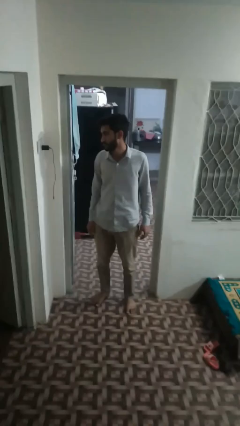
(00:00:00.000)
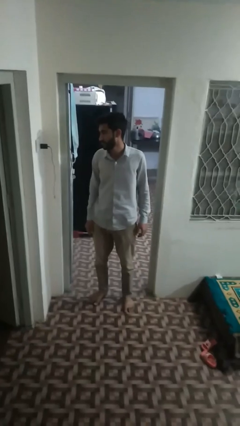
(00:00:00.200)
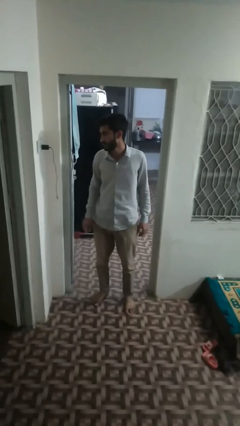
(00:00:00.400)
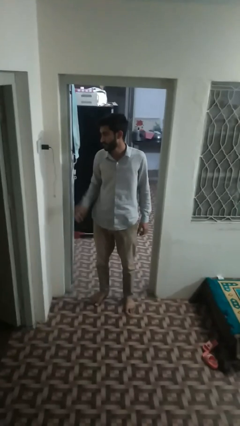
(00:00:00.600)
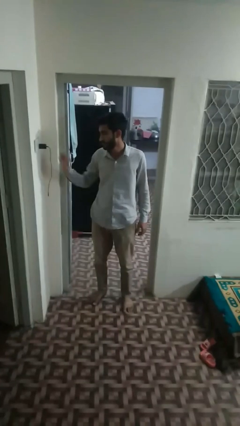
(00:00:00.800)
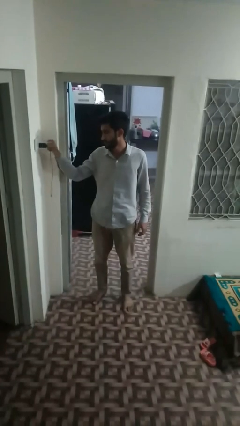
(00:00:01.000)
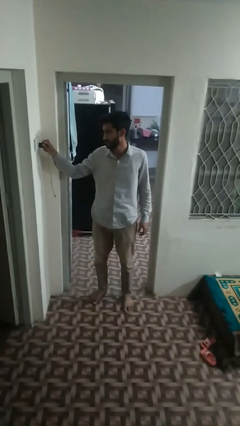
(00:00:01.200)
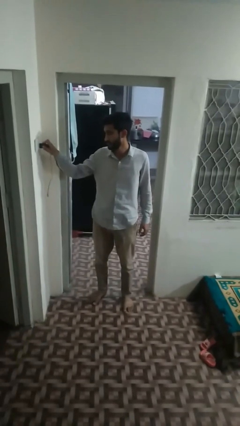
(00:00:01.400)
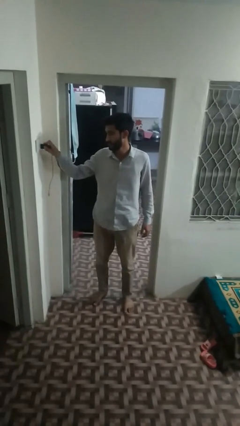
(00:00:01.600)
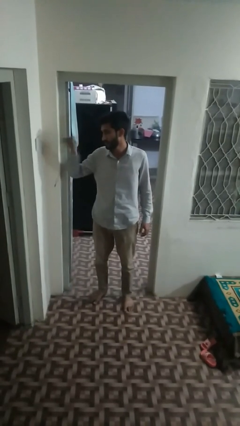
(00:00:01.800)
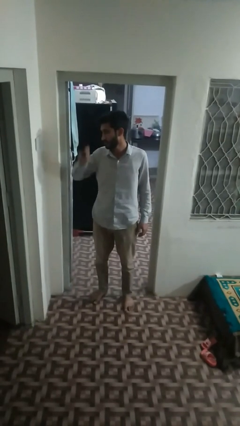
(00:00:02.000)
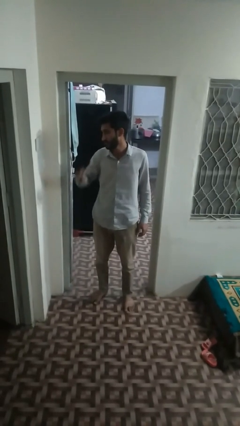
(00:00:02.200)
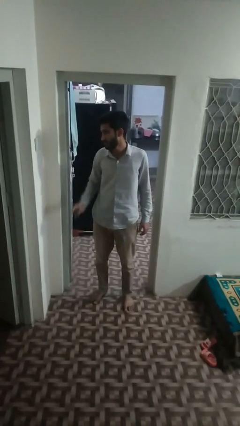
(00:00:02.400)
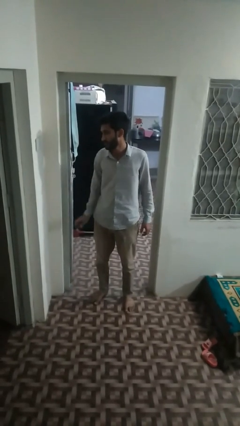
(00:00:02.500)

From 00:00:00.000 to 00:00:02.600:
person unplugs from electrical socket

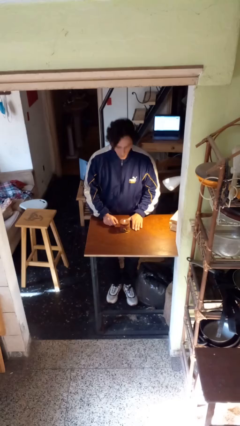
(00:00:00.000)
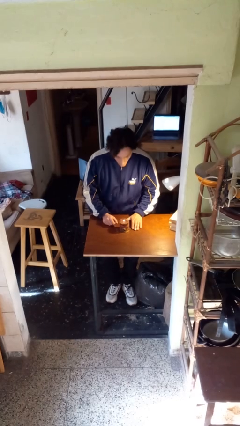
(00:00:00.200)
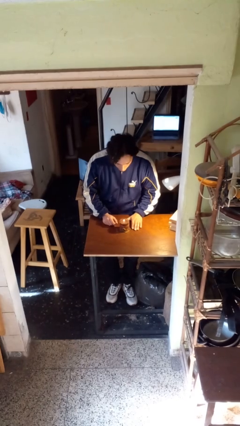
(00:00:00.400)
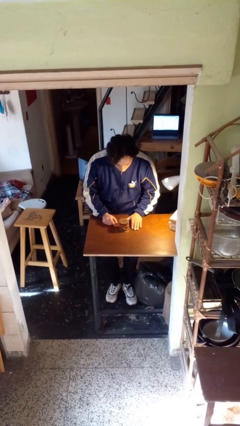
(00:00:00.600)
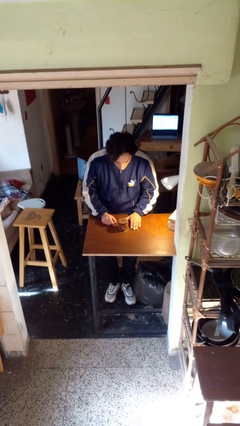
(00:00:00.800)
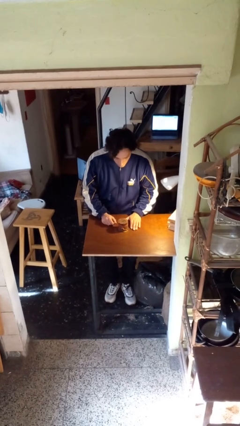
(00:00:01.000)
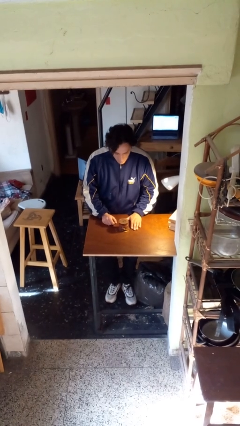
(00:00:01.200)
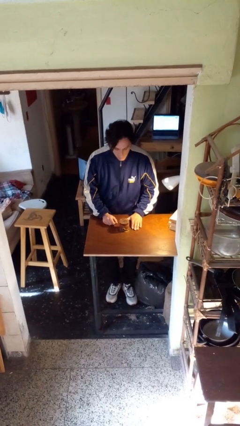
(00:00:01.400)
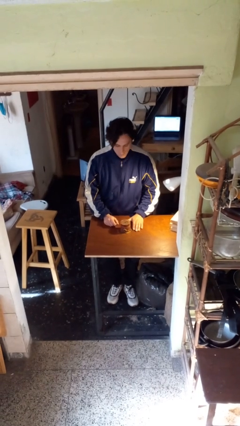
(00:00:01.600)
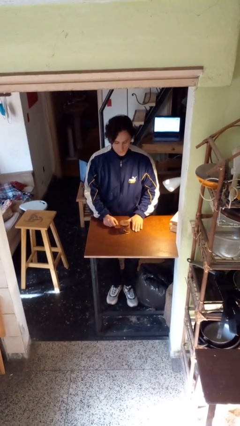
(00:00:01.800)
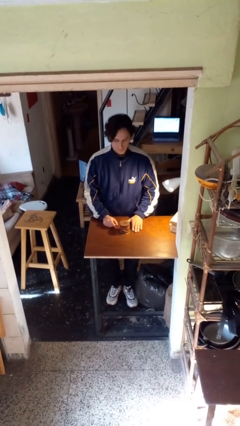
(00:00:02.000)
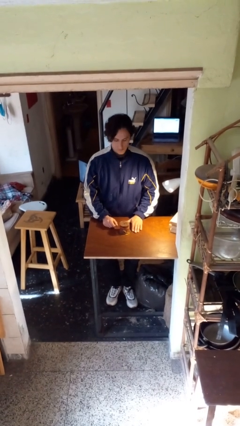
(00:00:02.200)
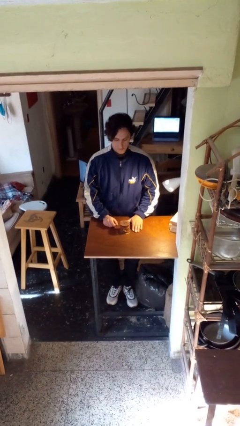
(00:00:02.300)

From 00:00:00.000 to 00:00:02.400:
person extinguishes candle

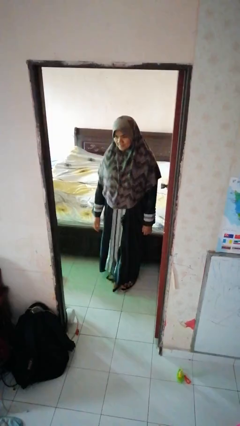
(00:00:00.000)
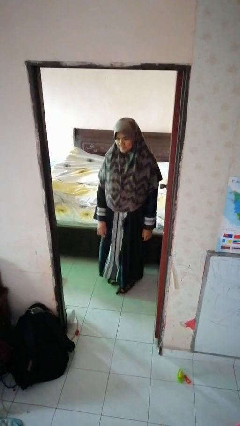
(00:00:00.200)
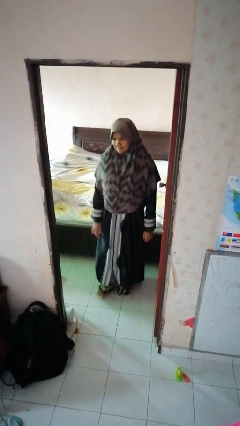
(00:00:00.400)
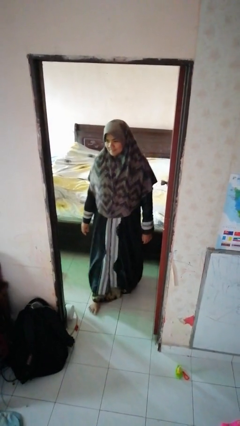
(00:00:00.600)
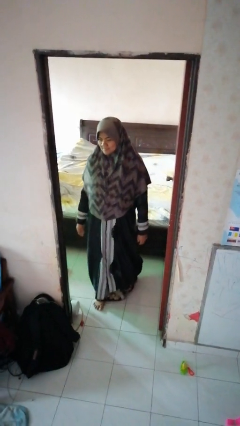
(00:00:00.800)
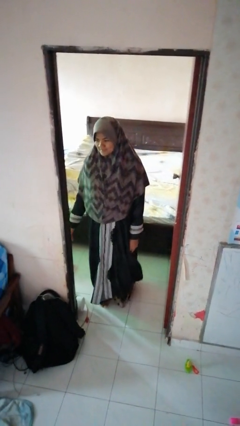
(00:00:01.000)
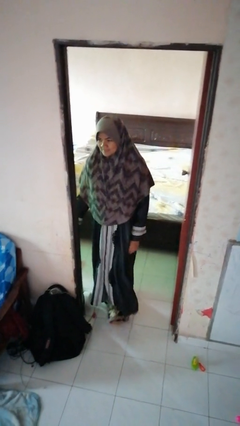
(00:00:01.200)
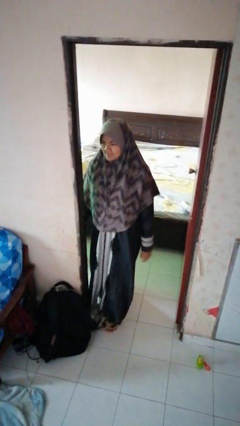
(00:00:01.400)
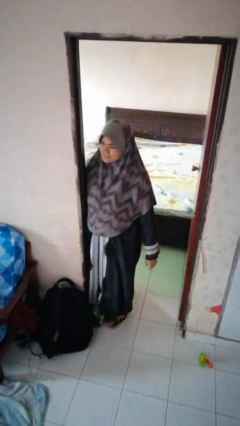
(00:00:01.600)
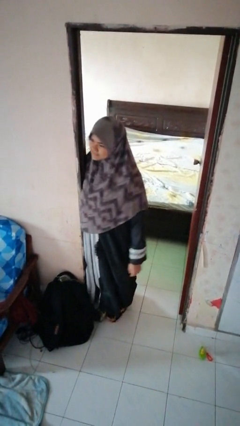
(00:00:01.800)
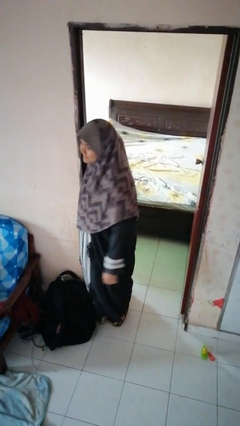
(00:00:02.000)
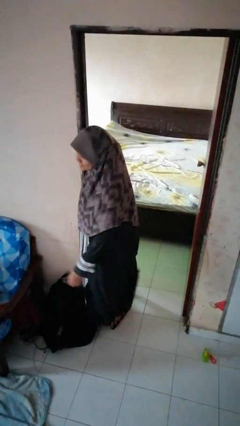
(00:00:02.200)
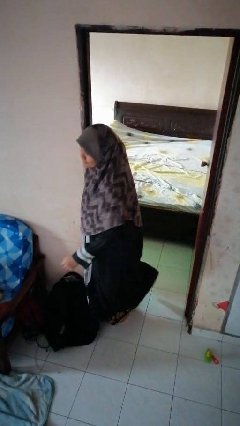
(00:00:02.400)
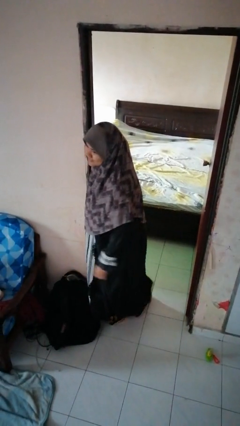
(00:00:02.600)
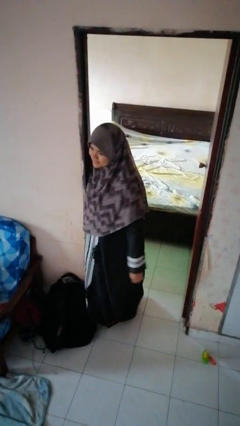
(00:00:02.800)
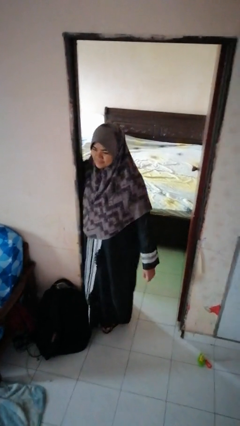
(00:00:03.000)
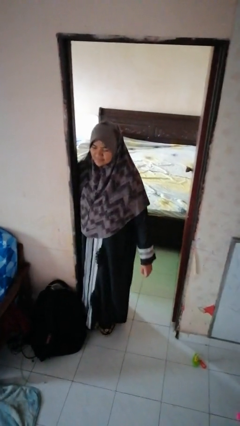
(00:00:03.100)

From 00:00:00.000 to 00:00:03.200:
person bumps into wall

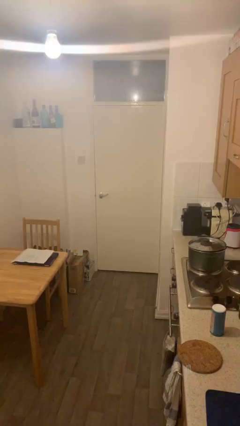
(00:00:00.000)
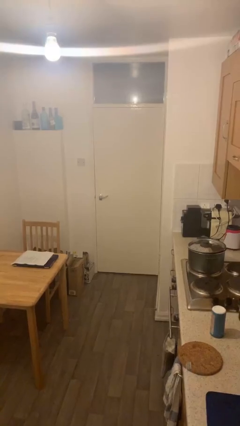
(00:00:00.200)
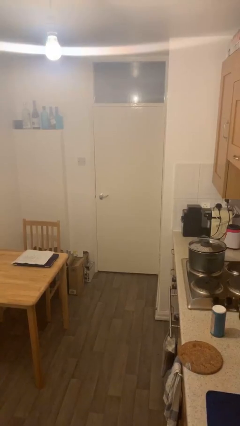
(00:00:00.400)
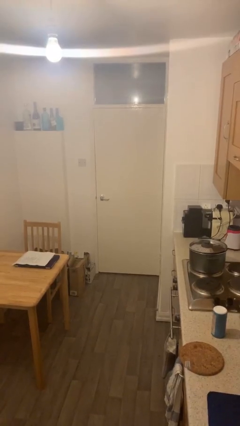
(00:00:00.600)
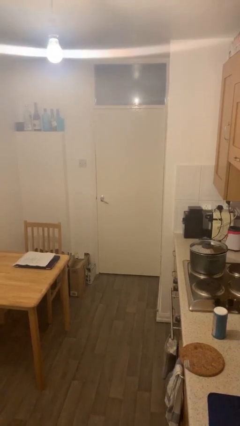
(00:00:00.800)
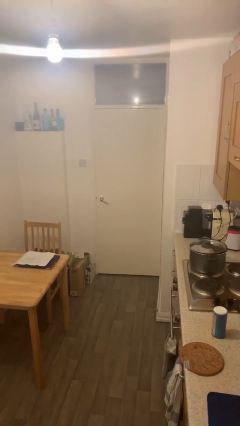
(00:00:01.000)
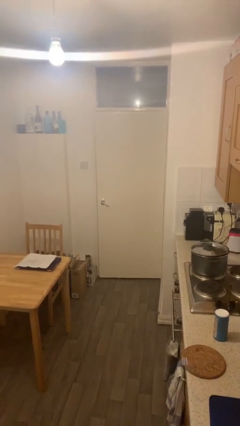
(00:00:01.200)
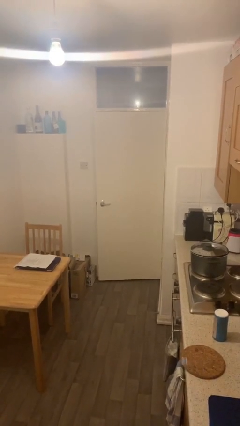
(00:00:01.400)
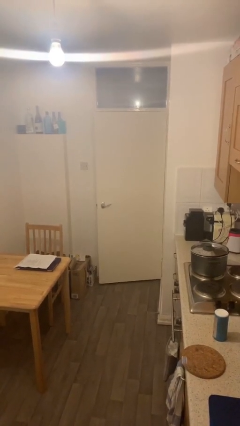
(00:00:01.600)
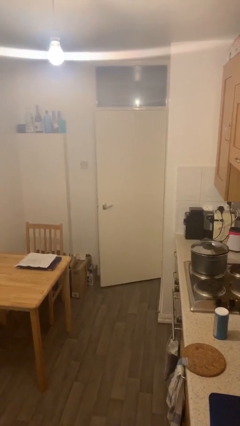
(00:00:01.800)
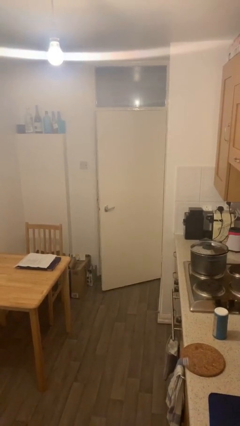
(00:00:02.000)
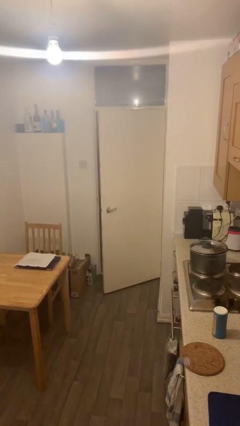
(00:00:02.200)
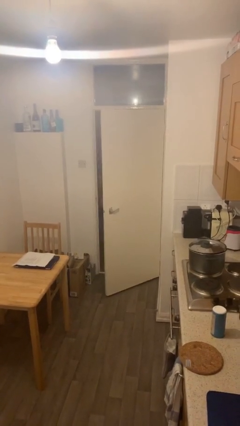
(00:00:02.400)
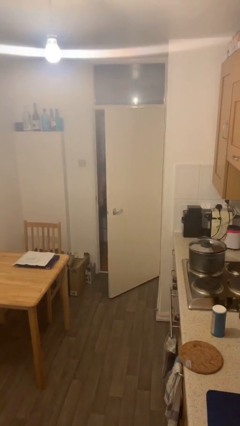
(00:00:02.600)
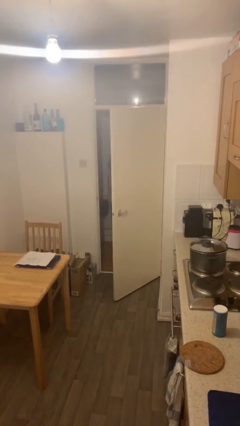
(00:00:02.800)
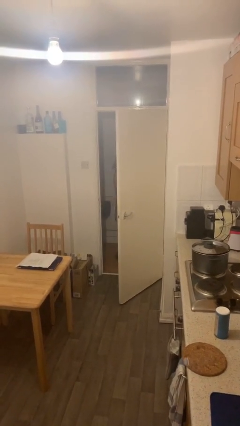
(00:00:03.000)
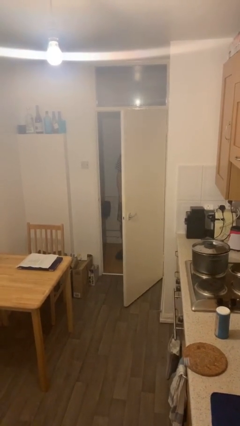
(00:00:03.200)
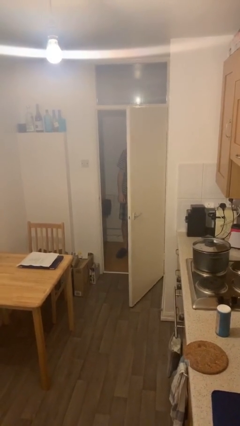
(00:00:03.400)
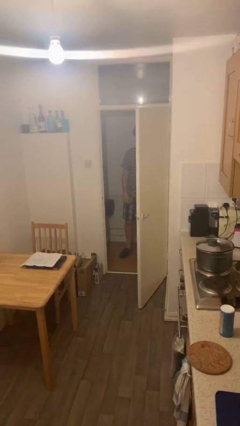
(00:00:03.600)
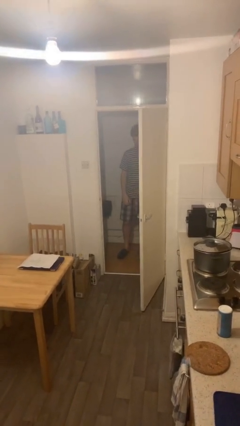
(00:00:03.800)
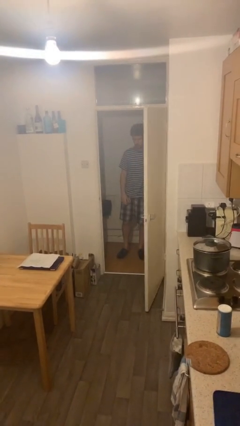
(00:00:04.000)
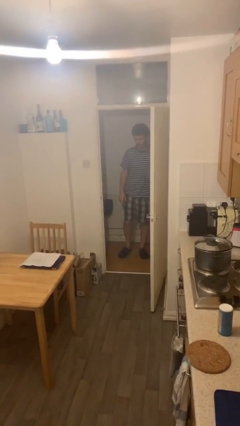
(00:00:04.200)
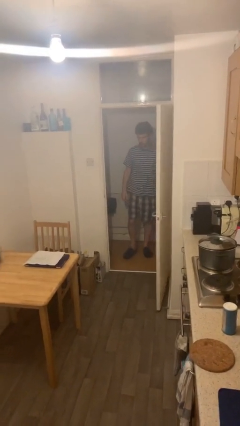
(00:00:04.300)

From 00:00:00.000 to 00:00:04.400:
person opens facility door

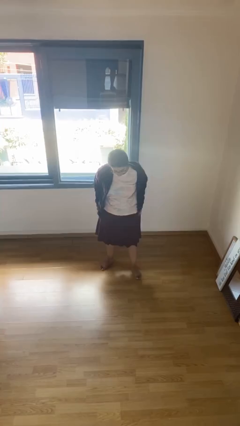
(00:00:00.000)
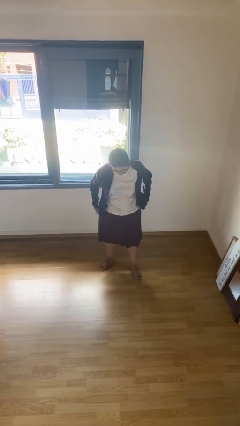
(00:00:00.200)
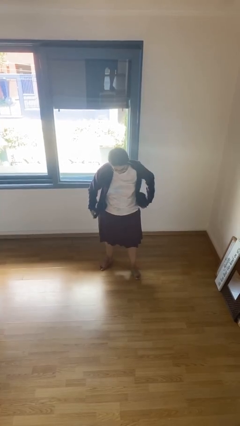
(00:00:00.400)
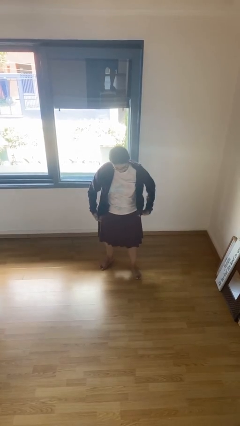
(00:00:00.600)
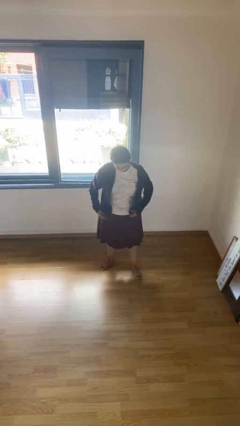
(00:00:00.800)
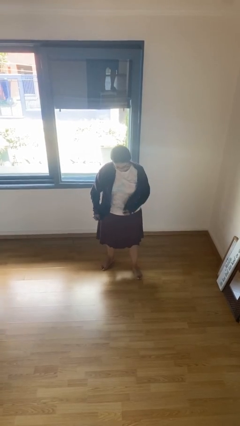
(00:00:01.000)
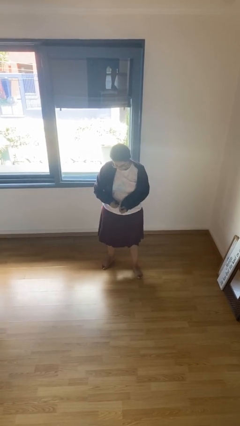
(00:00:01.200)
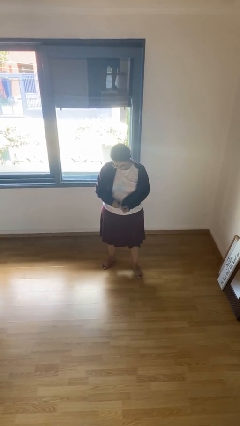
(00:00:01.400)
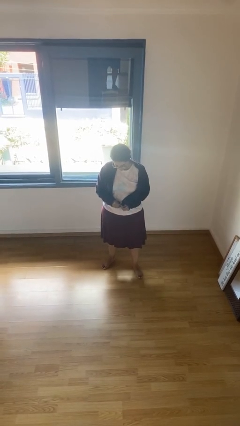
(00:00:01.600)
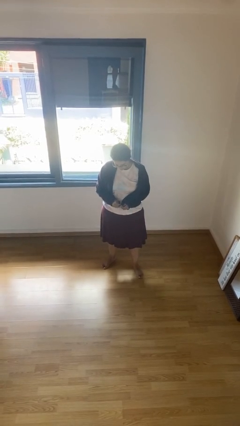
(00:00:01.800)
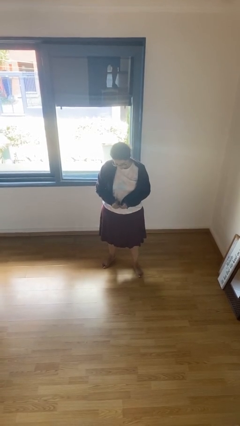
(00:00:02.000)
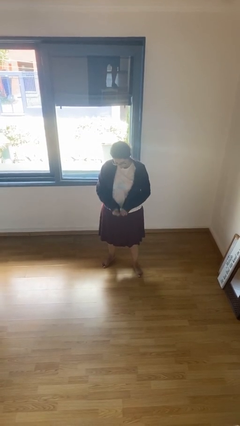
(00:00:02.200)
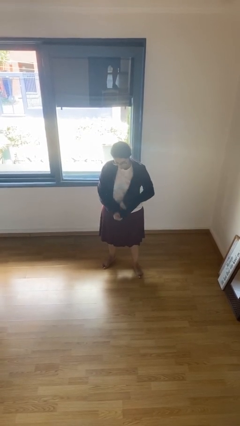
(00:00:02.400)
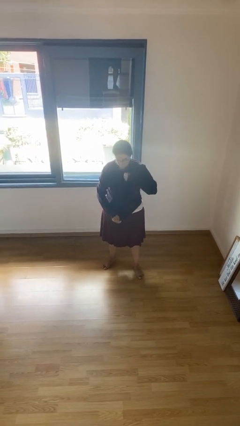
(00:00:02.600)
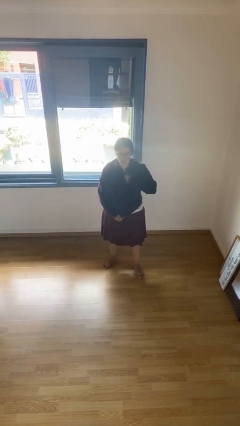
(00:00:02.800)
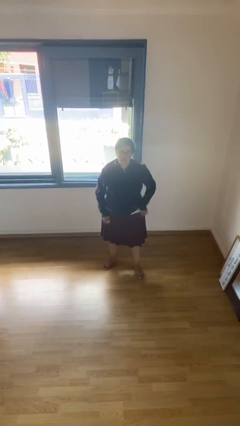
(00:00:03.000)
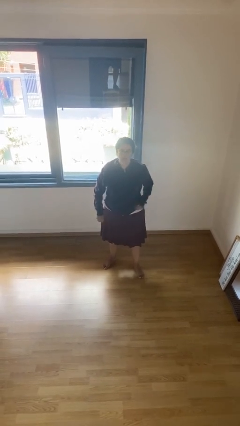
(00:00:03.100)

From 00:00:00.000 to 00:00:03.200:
person zips up jacket

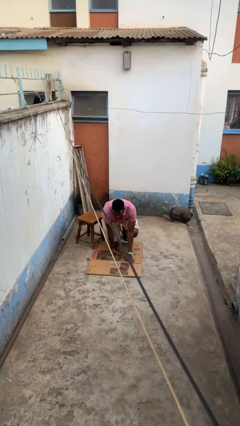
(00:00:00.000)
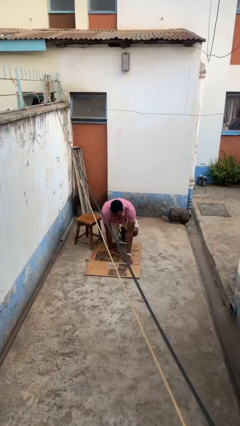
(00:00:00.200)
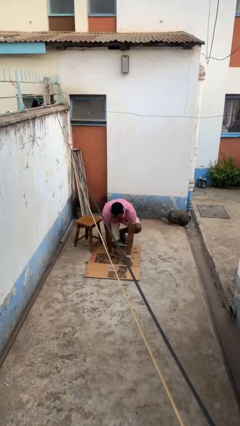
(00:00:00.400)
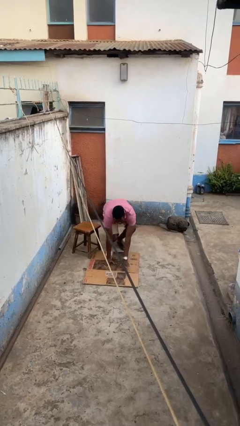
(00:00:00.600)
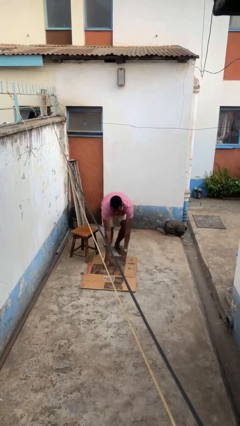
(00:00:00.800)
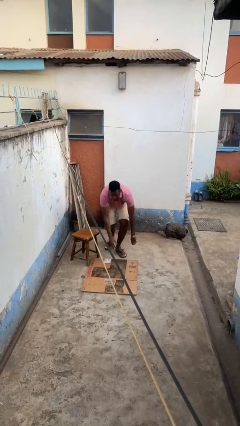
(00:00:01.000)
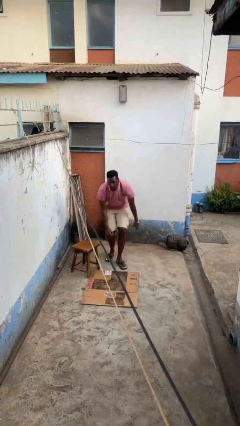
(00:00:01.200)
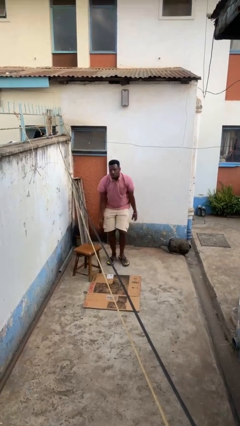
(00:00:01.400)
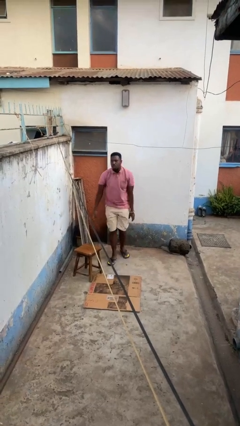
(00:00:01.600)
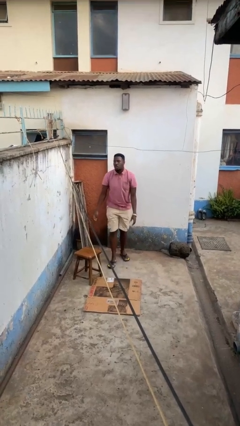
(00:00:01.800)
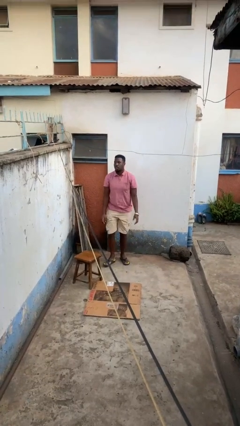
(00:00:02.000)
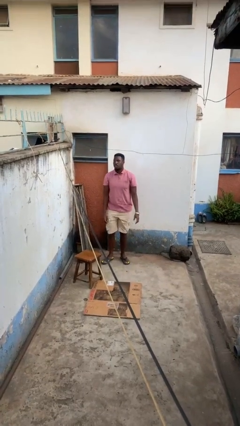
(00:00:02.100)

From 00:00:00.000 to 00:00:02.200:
person stands up from floor
